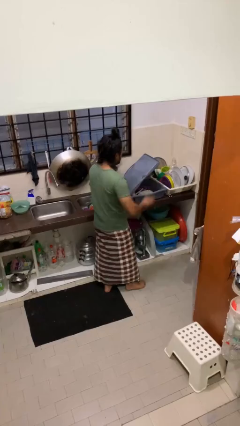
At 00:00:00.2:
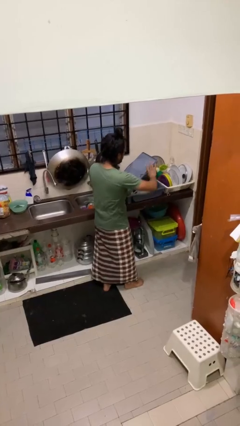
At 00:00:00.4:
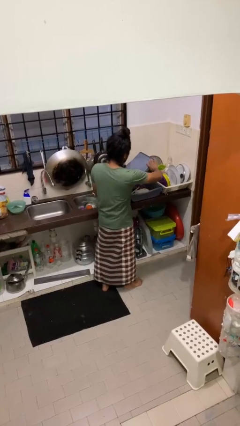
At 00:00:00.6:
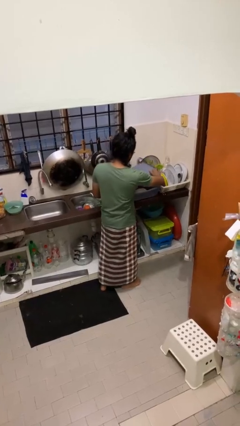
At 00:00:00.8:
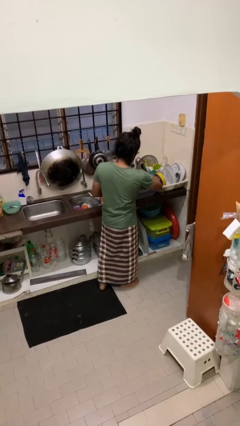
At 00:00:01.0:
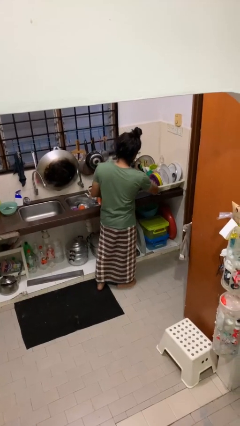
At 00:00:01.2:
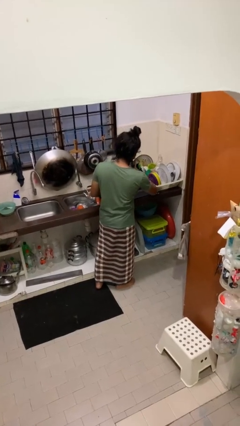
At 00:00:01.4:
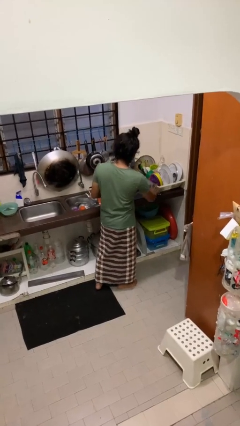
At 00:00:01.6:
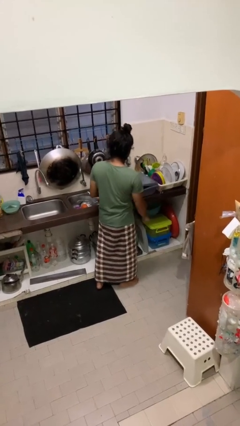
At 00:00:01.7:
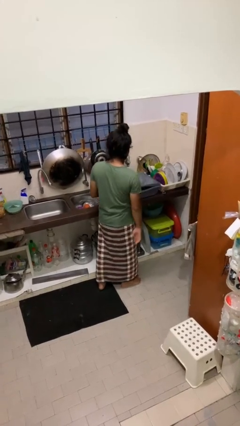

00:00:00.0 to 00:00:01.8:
person closes dishwasher

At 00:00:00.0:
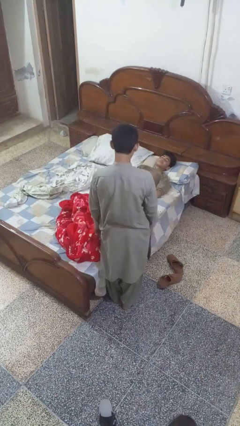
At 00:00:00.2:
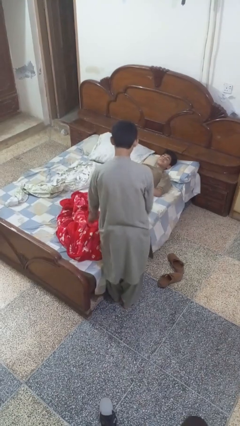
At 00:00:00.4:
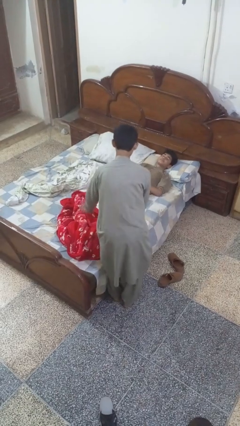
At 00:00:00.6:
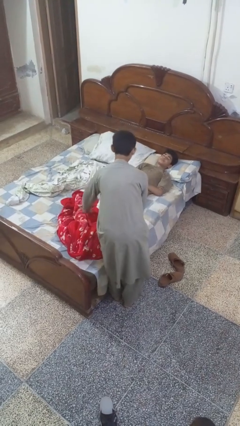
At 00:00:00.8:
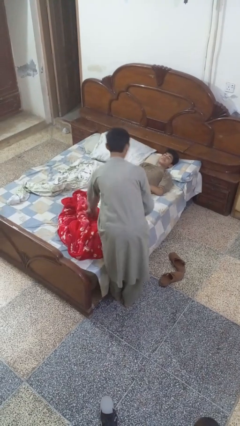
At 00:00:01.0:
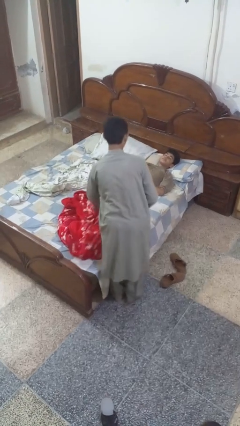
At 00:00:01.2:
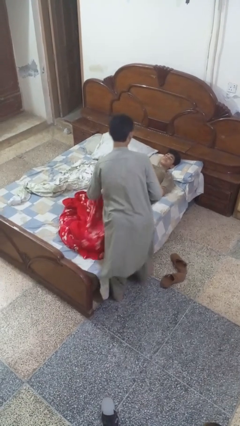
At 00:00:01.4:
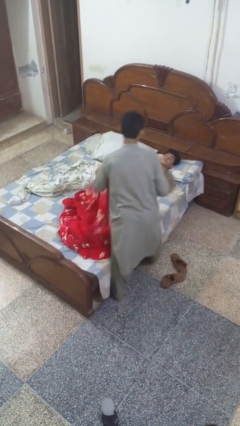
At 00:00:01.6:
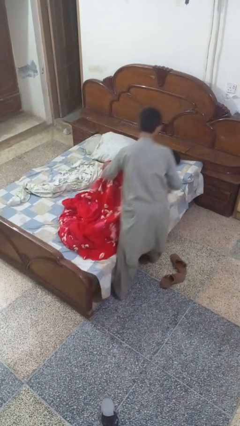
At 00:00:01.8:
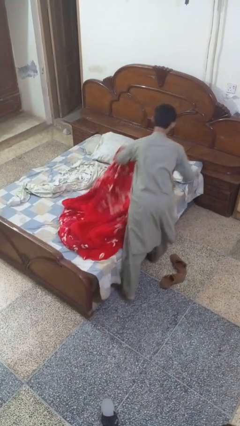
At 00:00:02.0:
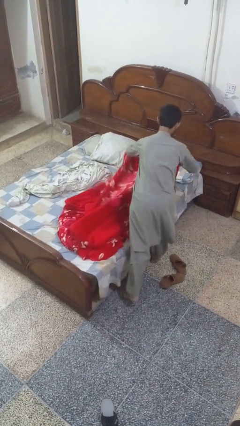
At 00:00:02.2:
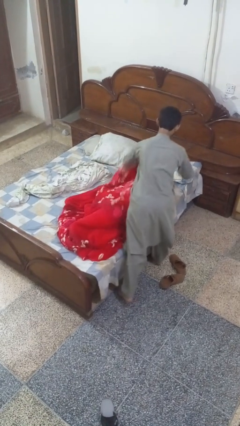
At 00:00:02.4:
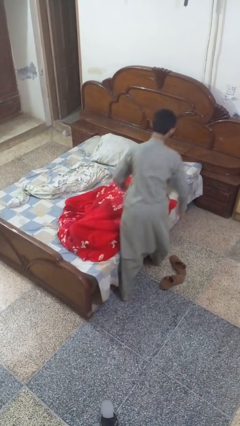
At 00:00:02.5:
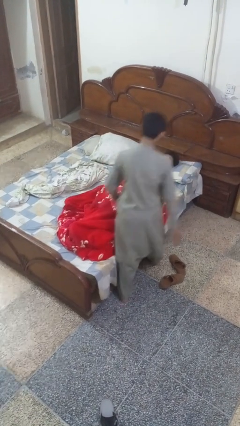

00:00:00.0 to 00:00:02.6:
person covers friend with blanket

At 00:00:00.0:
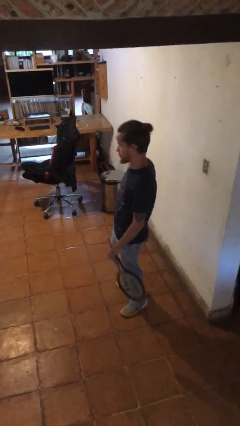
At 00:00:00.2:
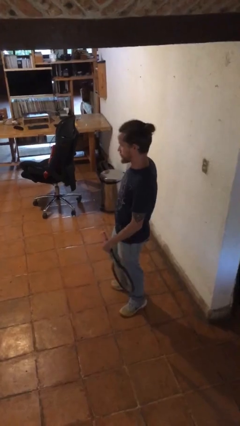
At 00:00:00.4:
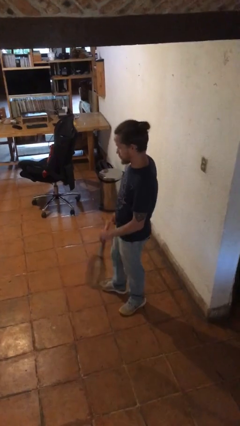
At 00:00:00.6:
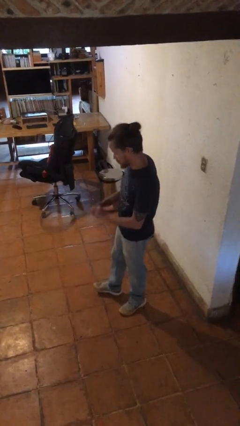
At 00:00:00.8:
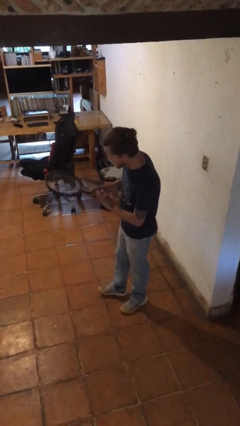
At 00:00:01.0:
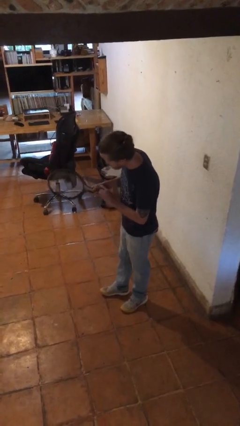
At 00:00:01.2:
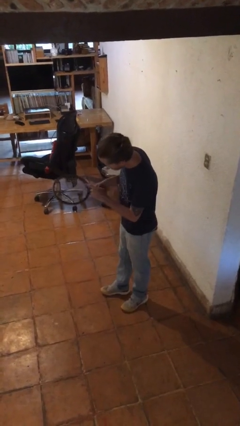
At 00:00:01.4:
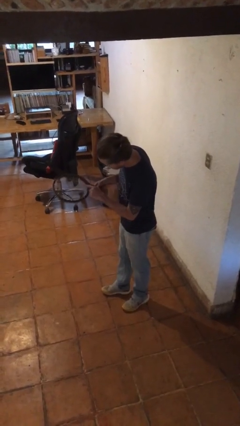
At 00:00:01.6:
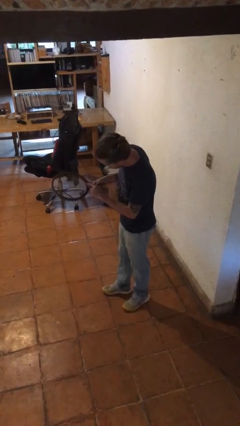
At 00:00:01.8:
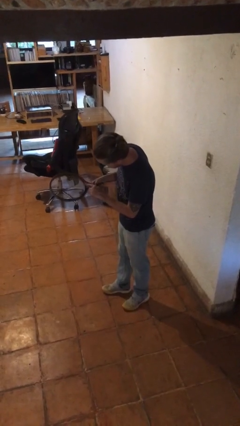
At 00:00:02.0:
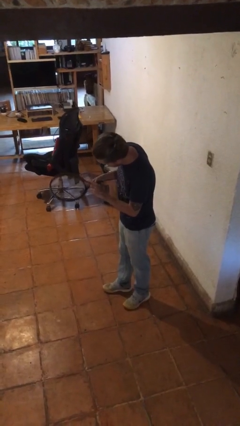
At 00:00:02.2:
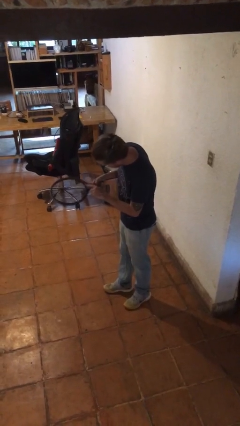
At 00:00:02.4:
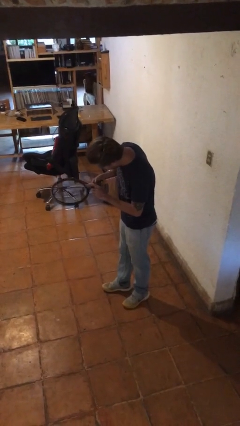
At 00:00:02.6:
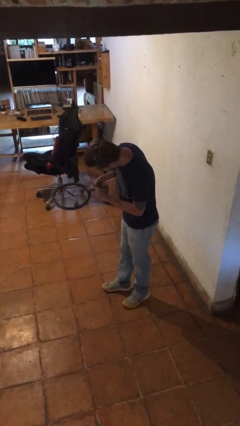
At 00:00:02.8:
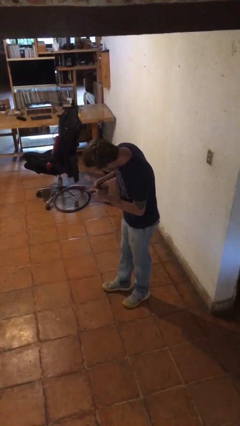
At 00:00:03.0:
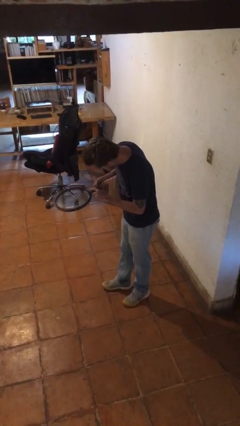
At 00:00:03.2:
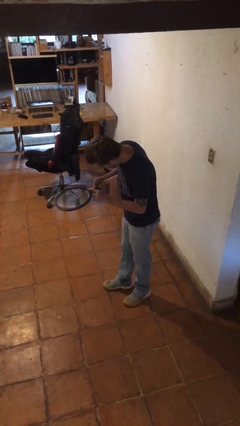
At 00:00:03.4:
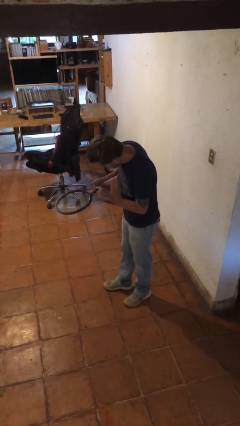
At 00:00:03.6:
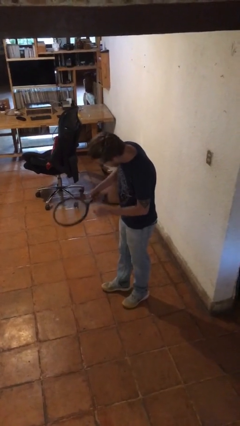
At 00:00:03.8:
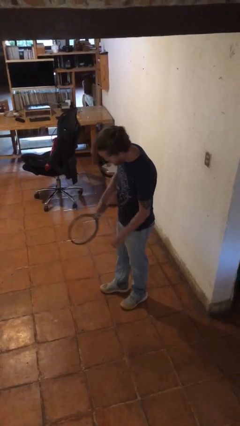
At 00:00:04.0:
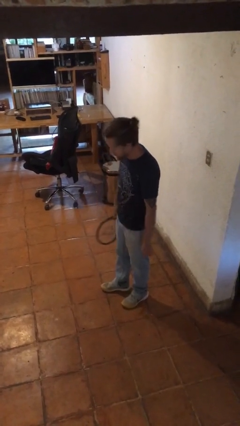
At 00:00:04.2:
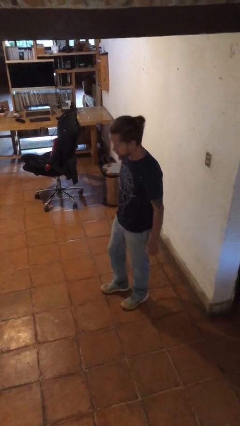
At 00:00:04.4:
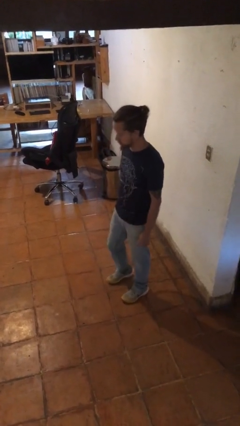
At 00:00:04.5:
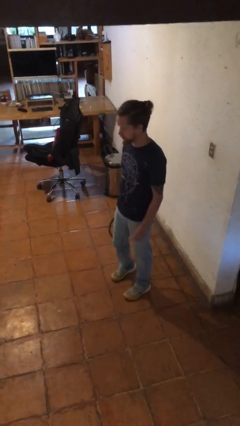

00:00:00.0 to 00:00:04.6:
person taps object with finger

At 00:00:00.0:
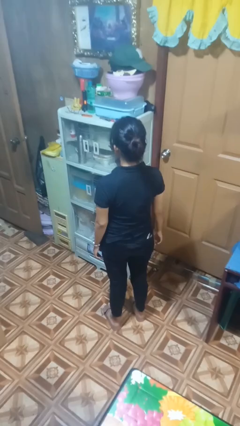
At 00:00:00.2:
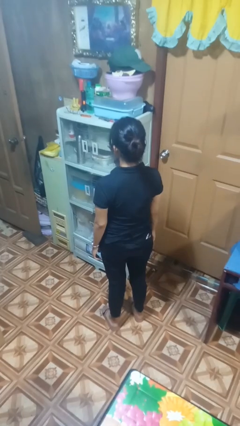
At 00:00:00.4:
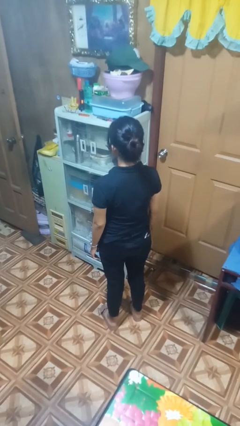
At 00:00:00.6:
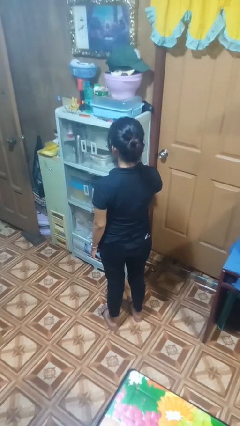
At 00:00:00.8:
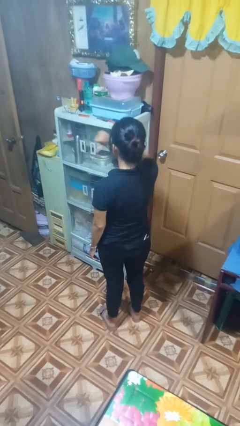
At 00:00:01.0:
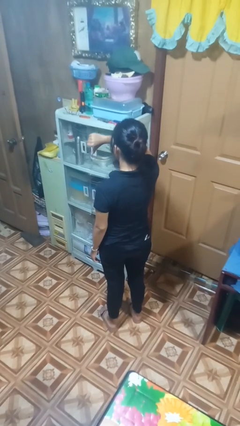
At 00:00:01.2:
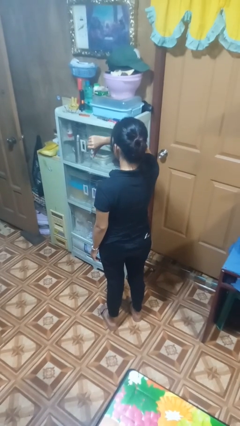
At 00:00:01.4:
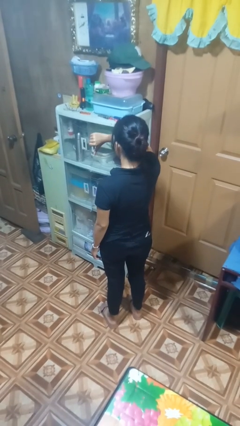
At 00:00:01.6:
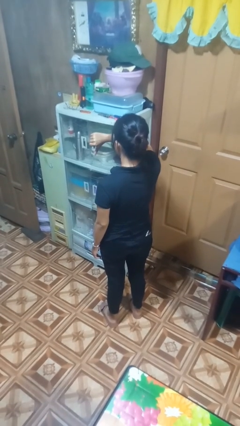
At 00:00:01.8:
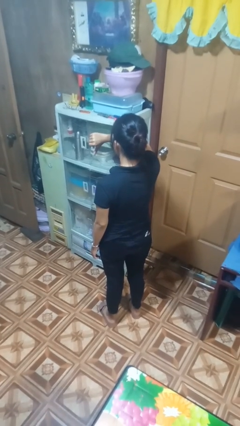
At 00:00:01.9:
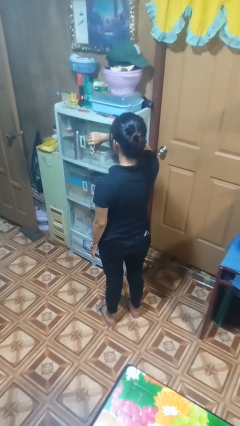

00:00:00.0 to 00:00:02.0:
person gestures thumbs down

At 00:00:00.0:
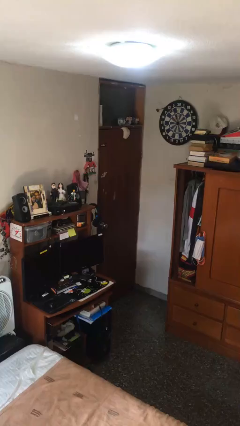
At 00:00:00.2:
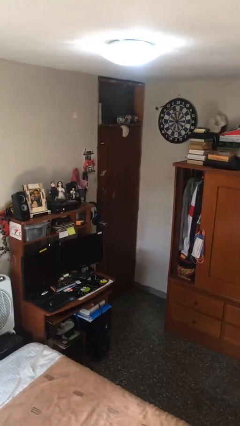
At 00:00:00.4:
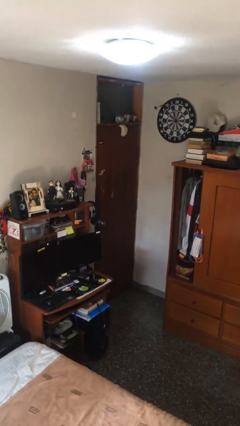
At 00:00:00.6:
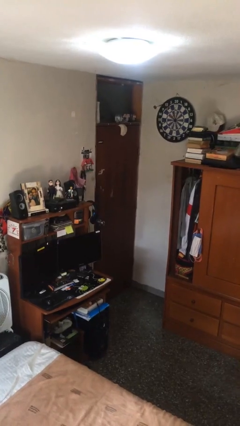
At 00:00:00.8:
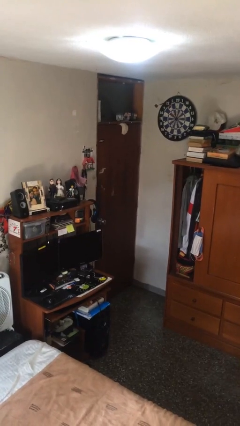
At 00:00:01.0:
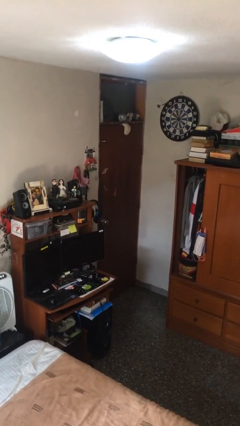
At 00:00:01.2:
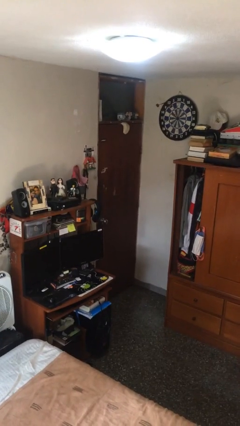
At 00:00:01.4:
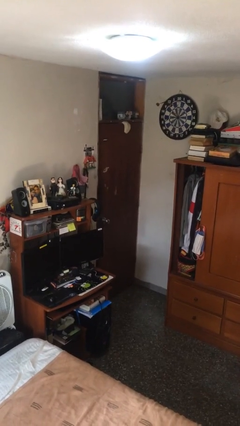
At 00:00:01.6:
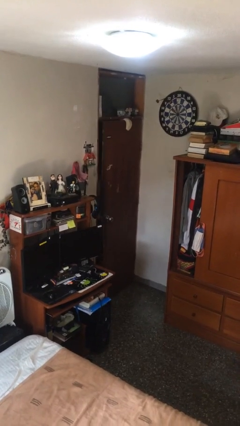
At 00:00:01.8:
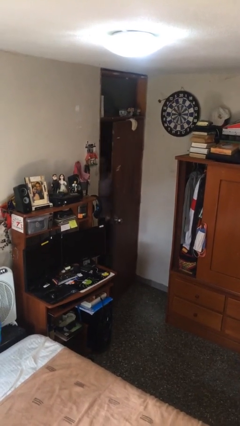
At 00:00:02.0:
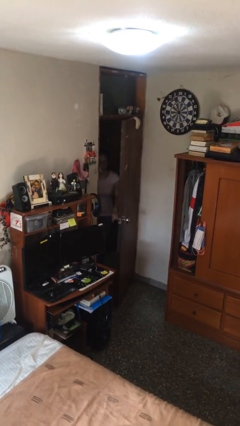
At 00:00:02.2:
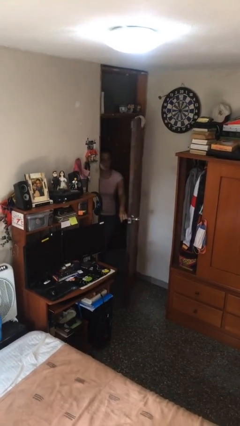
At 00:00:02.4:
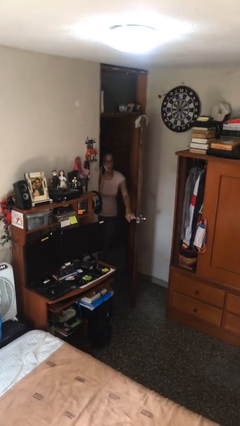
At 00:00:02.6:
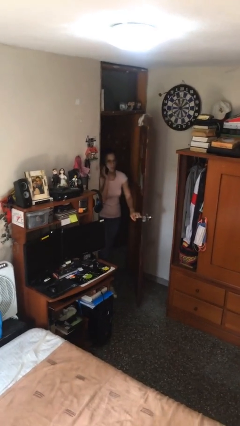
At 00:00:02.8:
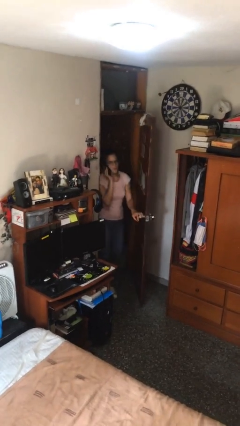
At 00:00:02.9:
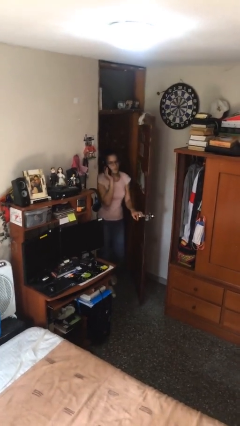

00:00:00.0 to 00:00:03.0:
person opens facility door

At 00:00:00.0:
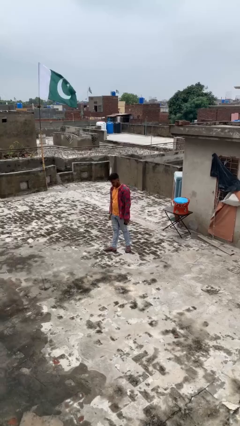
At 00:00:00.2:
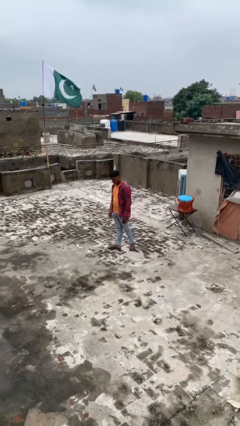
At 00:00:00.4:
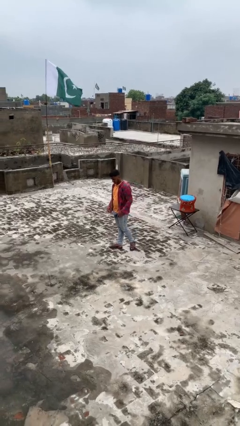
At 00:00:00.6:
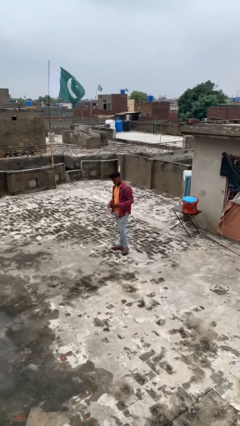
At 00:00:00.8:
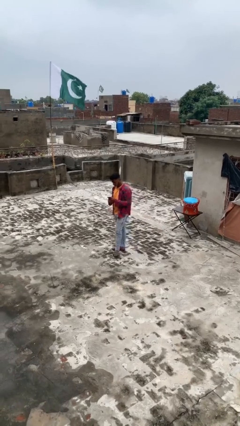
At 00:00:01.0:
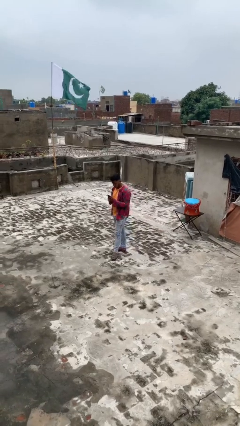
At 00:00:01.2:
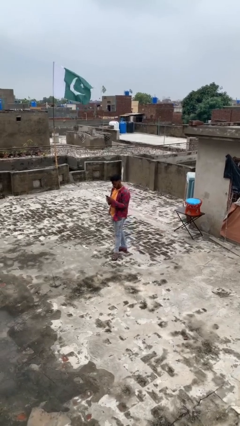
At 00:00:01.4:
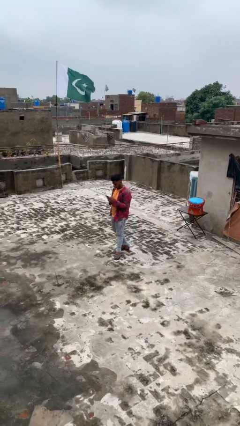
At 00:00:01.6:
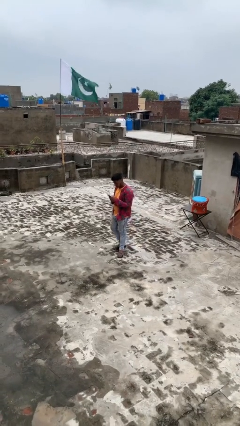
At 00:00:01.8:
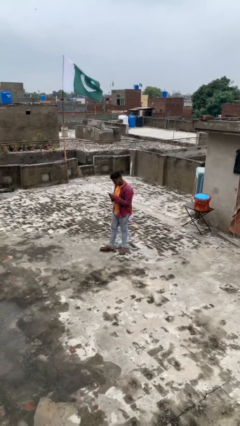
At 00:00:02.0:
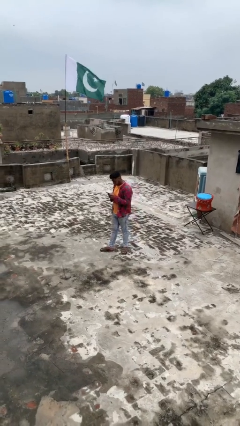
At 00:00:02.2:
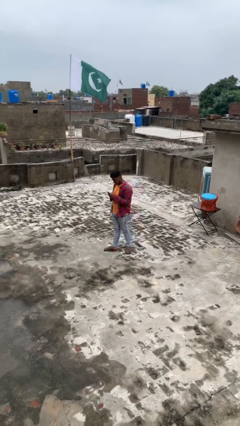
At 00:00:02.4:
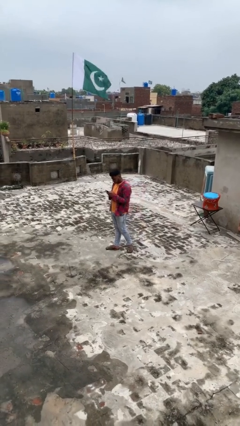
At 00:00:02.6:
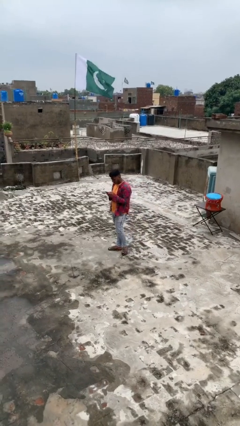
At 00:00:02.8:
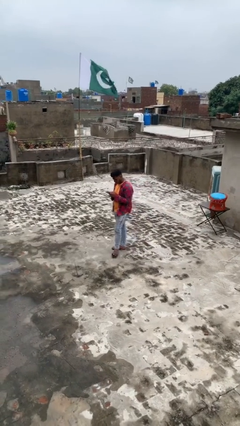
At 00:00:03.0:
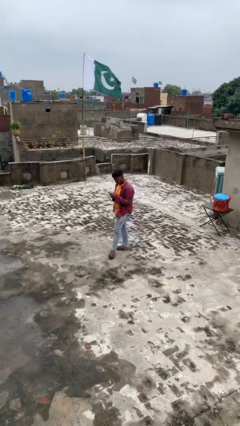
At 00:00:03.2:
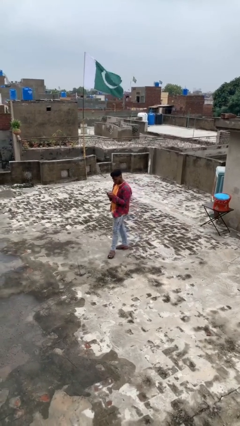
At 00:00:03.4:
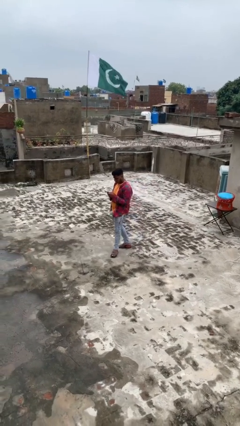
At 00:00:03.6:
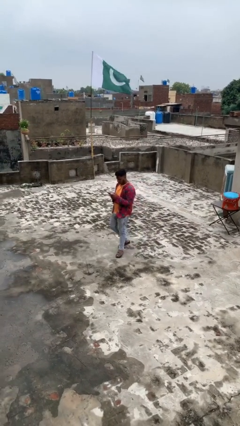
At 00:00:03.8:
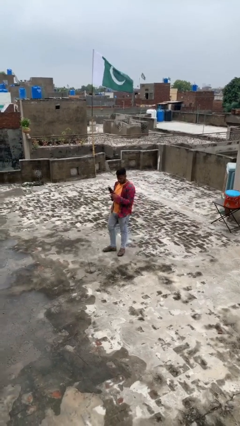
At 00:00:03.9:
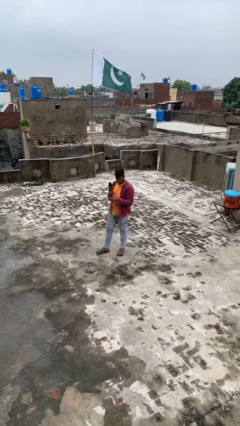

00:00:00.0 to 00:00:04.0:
person texts on phone
